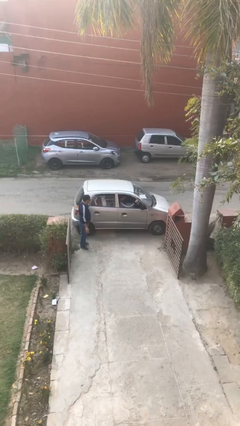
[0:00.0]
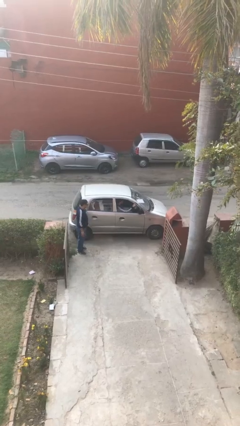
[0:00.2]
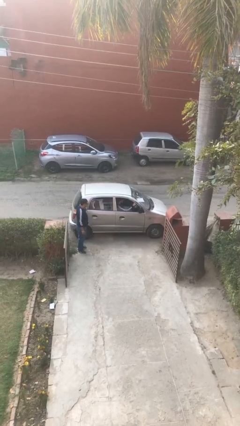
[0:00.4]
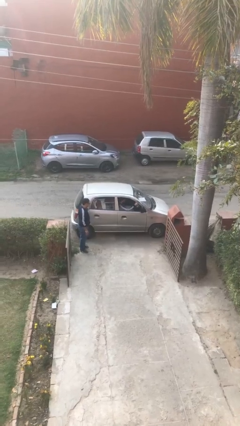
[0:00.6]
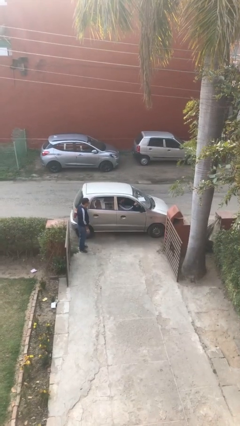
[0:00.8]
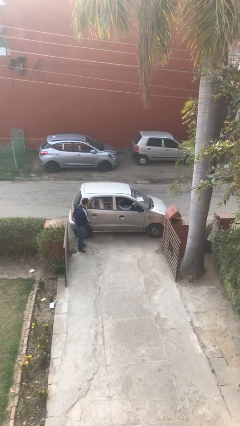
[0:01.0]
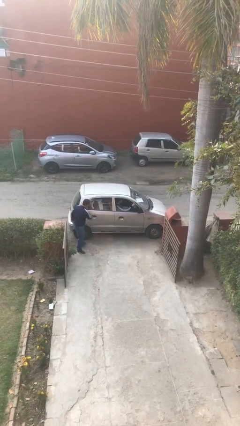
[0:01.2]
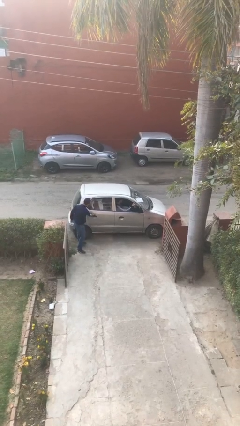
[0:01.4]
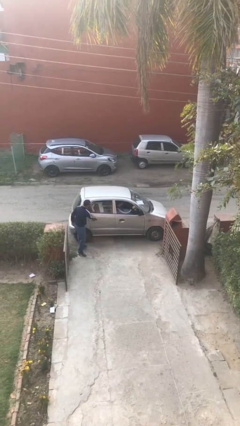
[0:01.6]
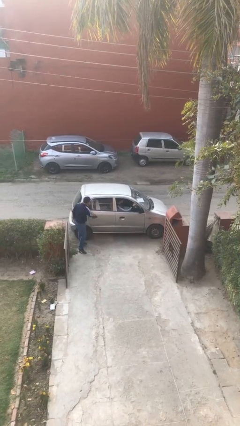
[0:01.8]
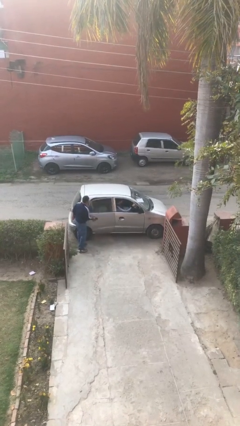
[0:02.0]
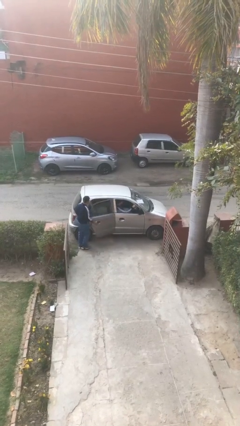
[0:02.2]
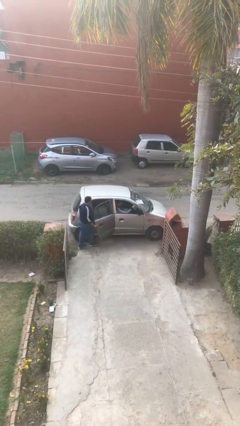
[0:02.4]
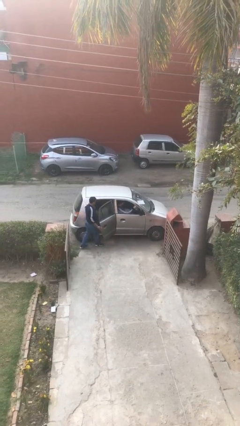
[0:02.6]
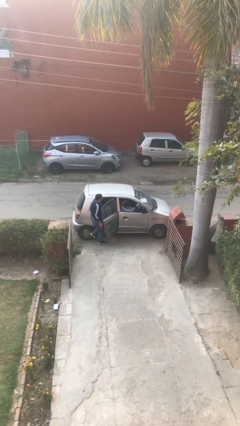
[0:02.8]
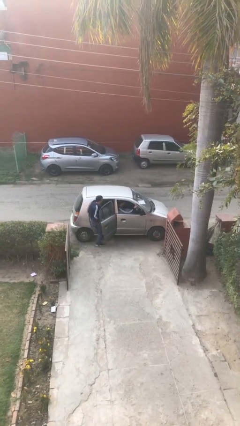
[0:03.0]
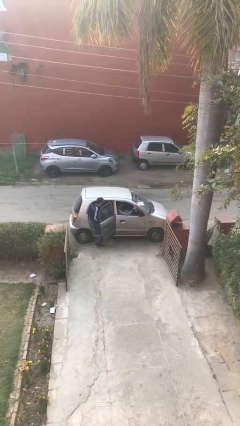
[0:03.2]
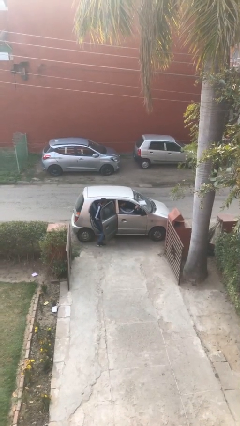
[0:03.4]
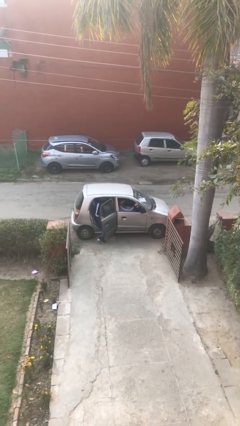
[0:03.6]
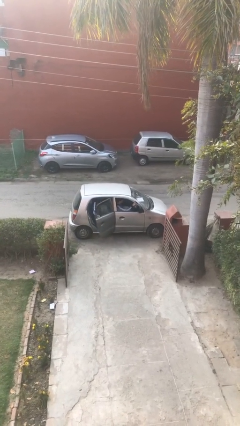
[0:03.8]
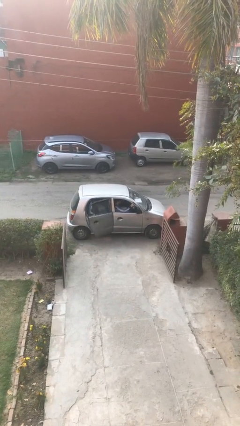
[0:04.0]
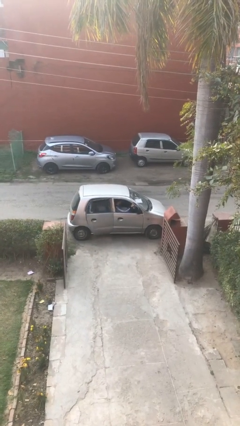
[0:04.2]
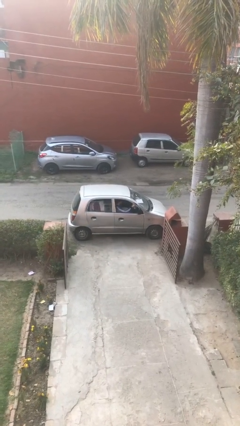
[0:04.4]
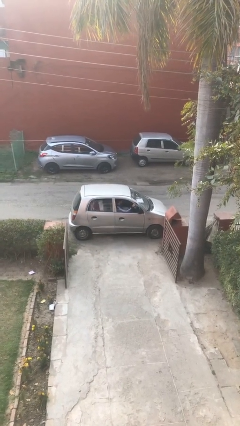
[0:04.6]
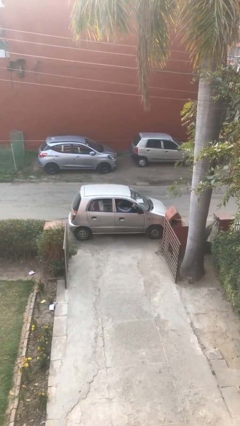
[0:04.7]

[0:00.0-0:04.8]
car picks up person

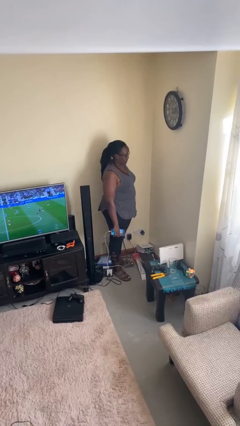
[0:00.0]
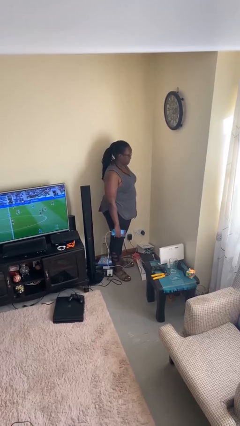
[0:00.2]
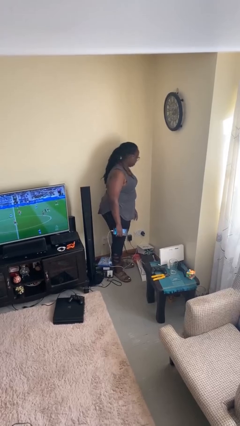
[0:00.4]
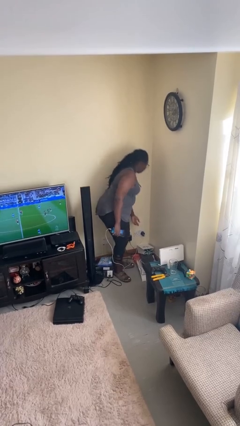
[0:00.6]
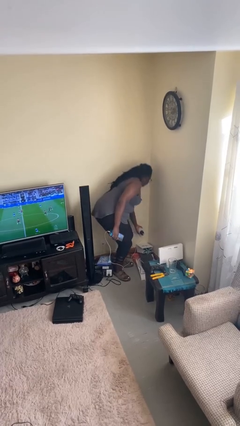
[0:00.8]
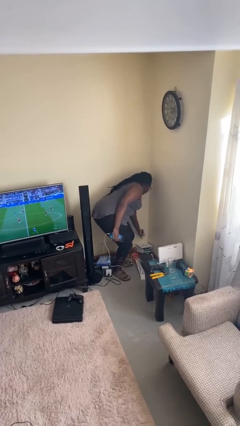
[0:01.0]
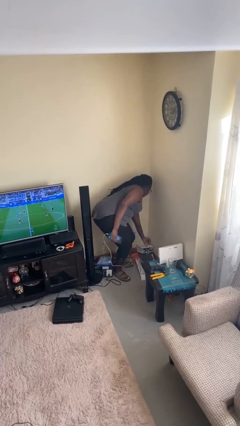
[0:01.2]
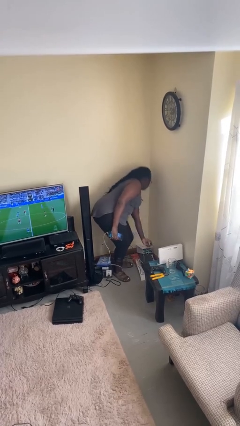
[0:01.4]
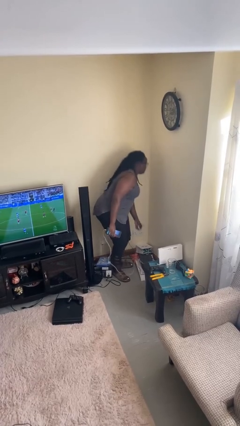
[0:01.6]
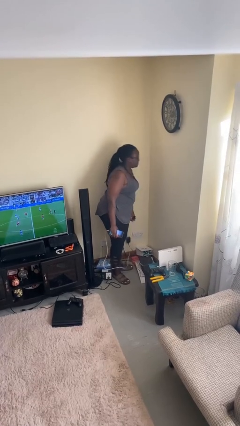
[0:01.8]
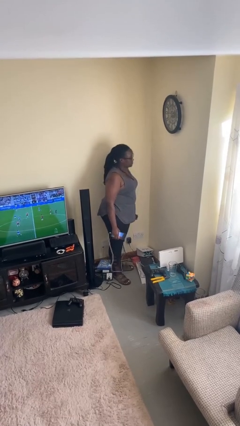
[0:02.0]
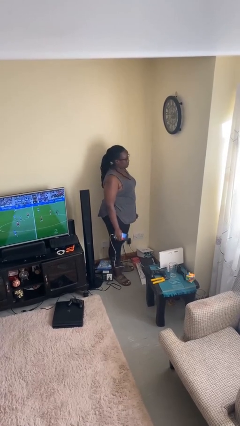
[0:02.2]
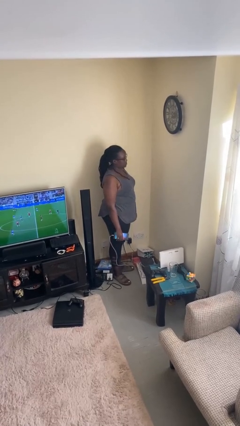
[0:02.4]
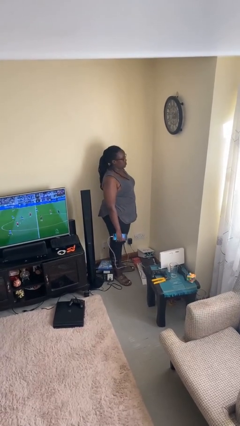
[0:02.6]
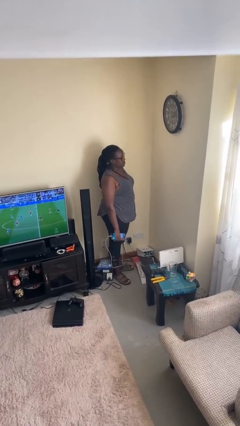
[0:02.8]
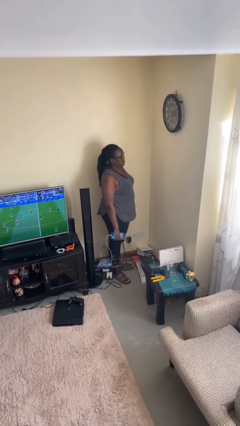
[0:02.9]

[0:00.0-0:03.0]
person unplugs from electrical socket

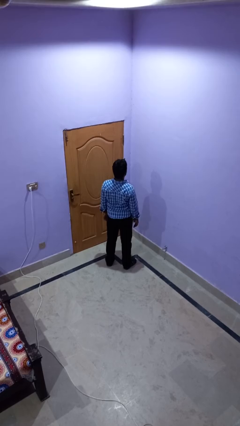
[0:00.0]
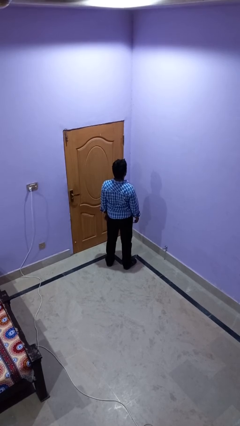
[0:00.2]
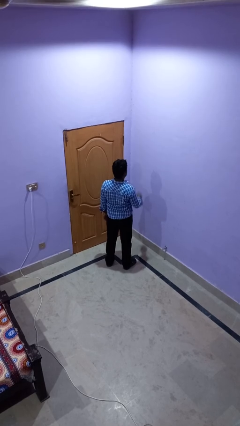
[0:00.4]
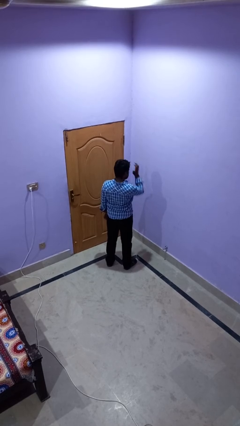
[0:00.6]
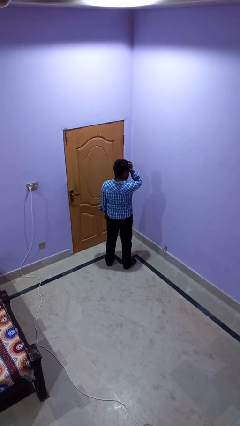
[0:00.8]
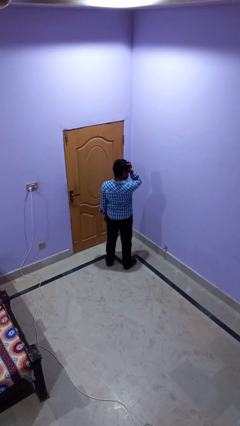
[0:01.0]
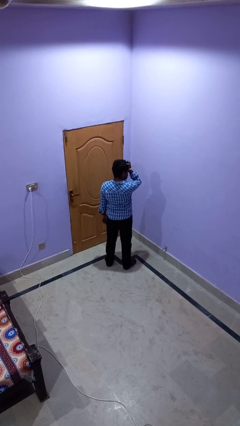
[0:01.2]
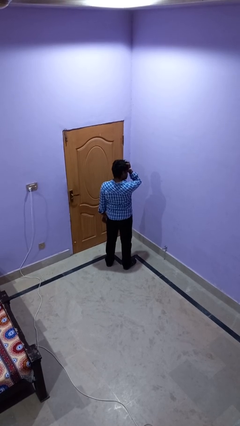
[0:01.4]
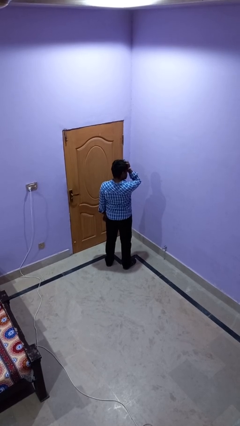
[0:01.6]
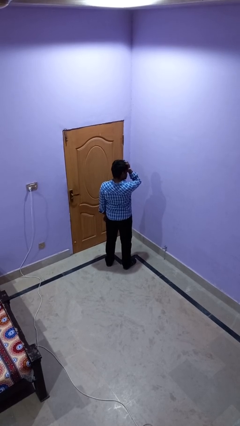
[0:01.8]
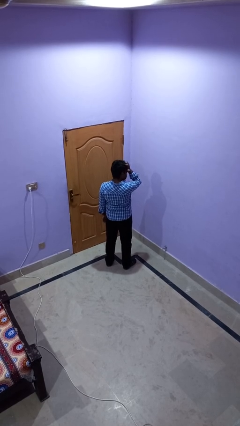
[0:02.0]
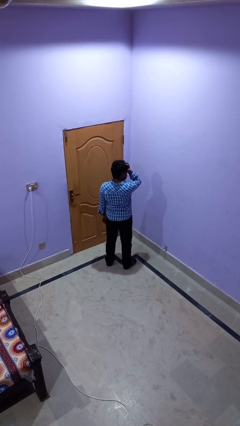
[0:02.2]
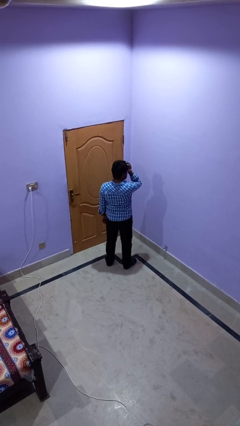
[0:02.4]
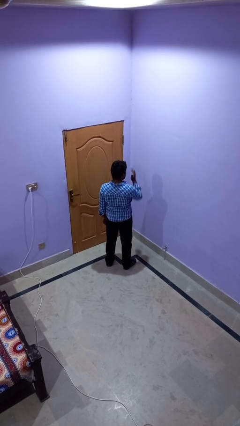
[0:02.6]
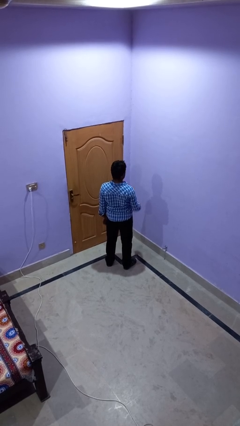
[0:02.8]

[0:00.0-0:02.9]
person rubs eyes

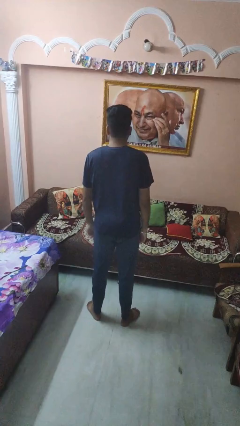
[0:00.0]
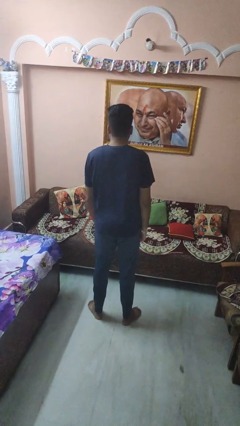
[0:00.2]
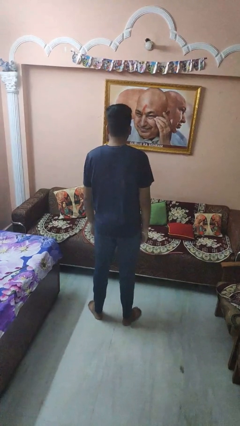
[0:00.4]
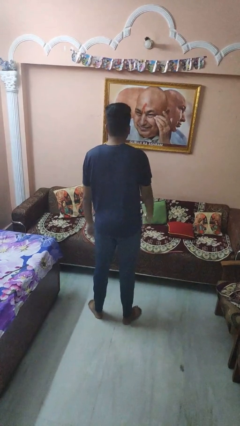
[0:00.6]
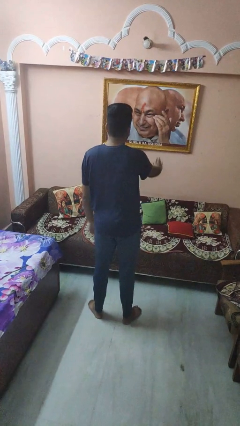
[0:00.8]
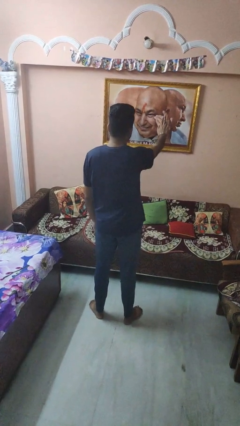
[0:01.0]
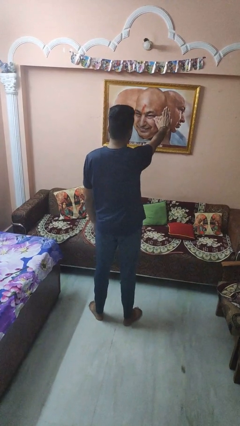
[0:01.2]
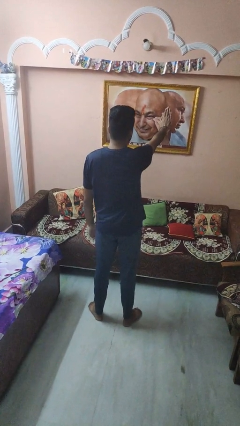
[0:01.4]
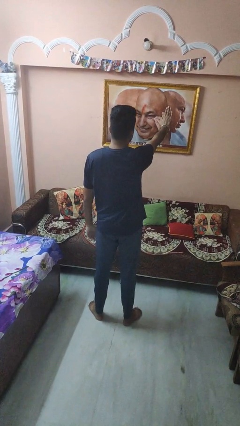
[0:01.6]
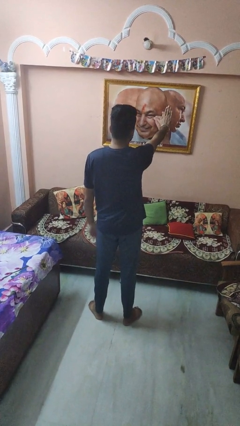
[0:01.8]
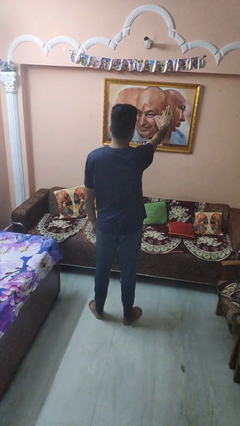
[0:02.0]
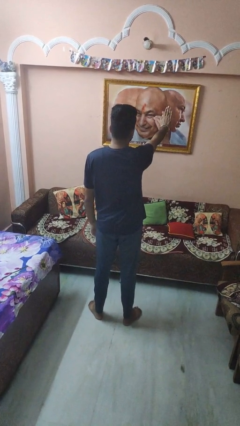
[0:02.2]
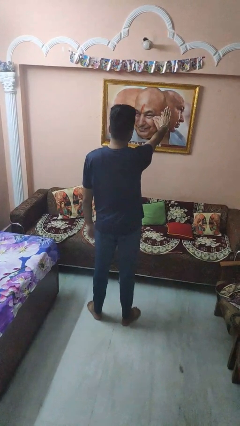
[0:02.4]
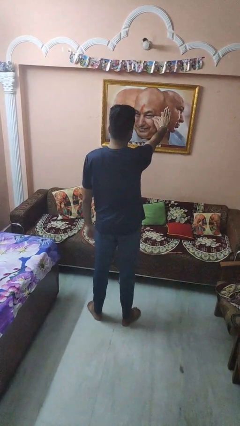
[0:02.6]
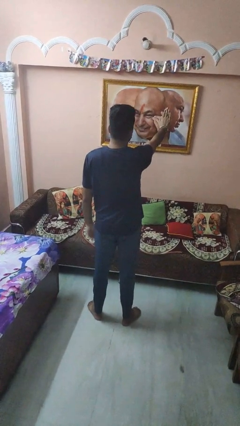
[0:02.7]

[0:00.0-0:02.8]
person gestures stop

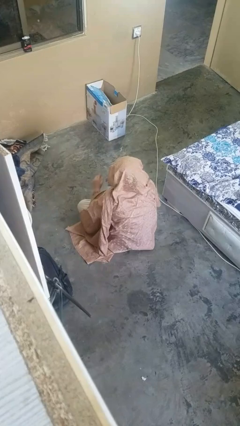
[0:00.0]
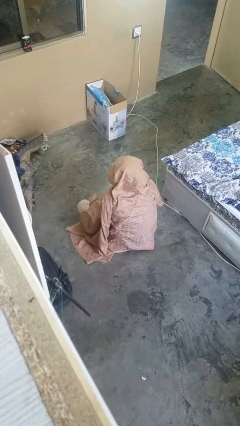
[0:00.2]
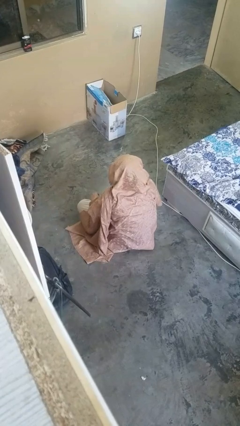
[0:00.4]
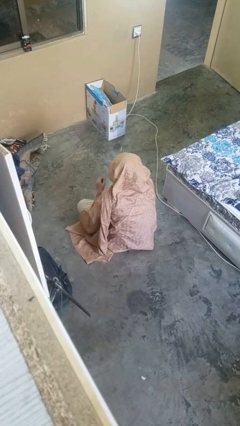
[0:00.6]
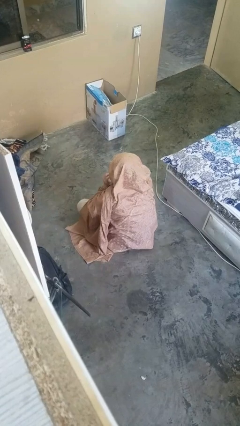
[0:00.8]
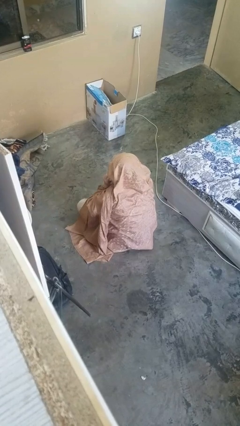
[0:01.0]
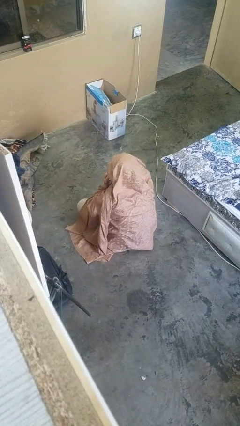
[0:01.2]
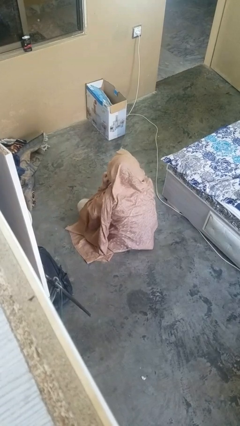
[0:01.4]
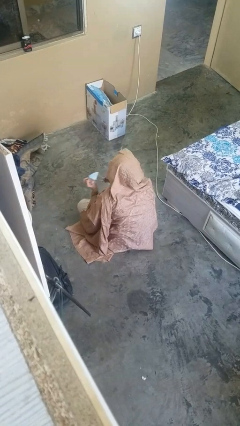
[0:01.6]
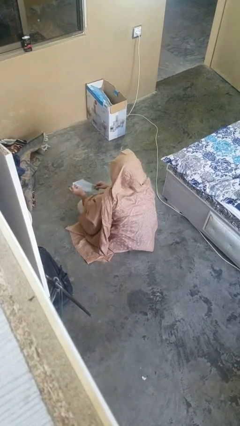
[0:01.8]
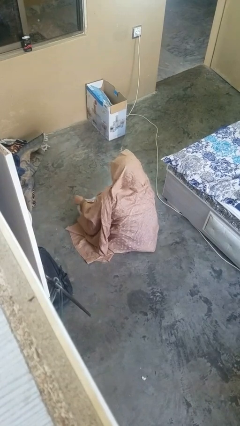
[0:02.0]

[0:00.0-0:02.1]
person takes off facemask

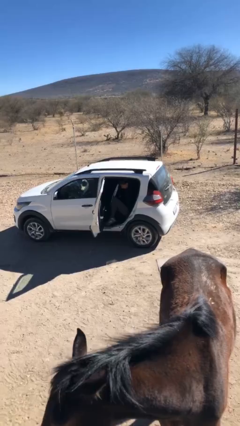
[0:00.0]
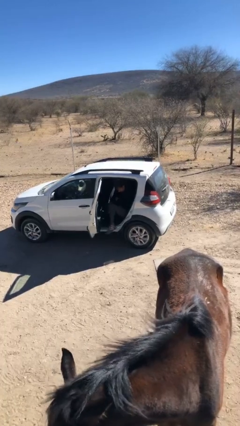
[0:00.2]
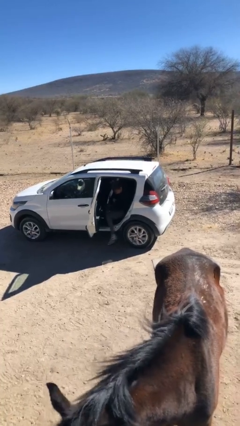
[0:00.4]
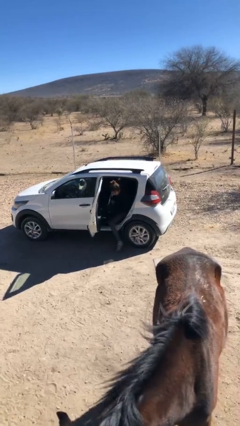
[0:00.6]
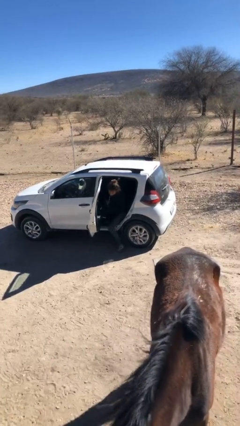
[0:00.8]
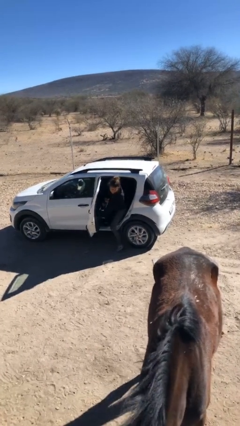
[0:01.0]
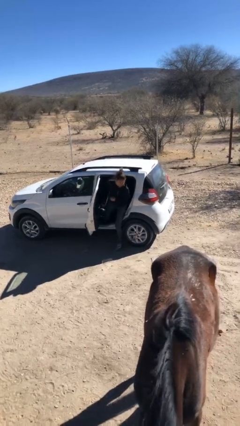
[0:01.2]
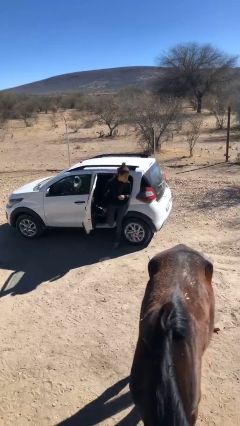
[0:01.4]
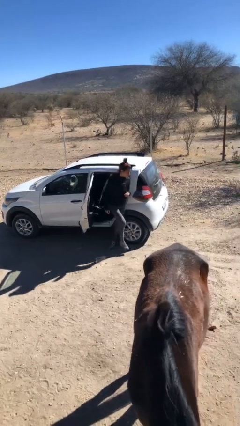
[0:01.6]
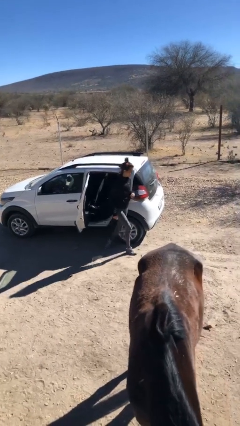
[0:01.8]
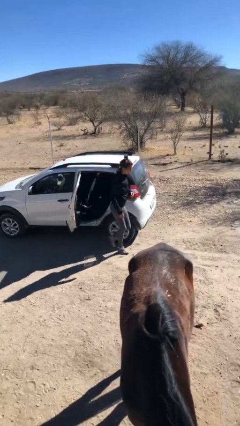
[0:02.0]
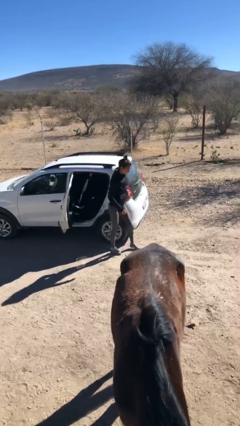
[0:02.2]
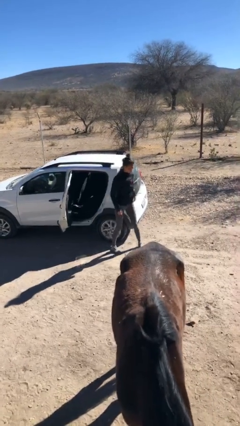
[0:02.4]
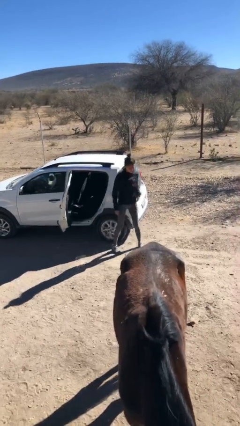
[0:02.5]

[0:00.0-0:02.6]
person exits car
